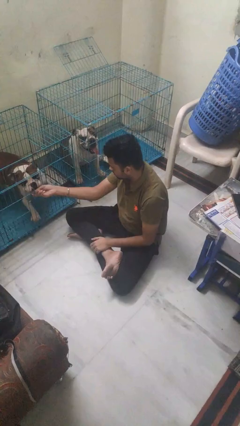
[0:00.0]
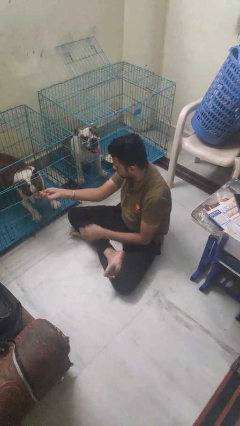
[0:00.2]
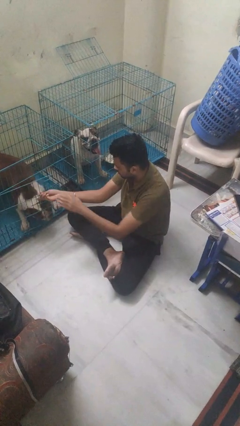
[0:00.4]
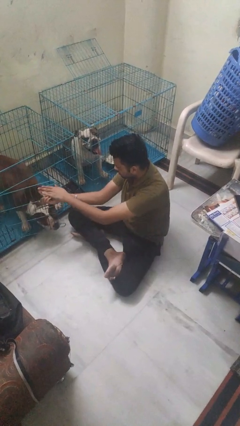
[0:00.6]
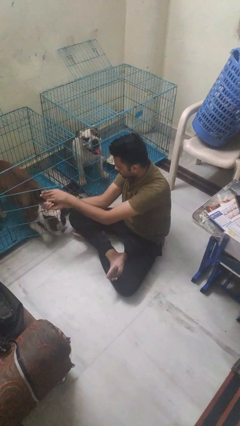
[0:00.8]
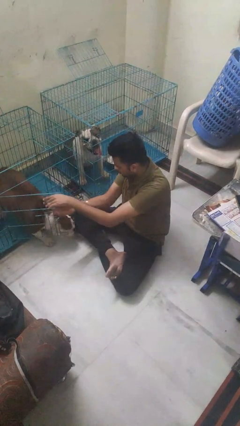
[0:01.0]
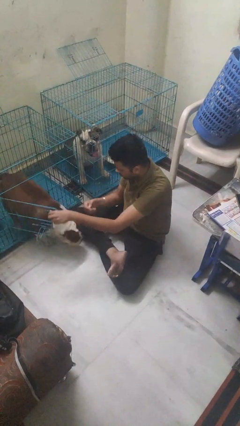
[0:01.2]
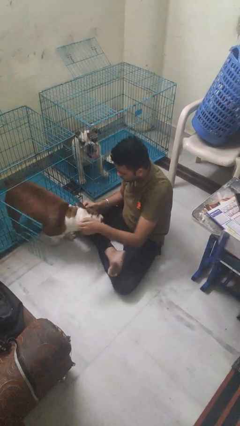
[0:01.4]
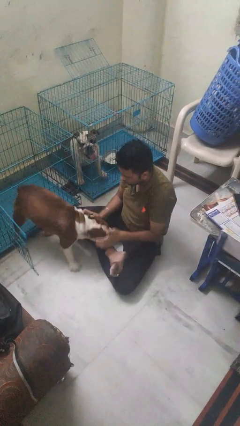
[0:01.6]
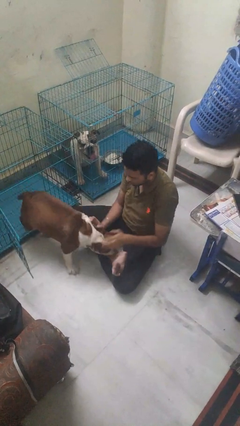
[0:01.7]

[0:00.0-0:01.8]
person uncrates dog

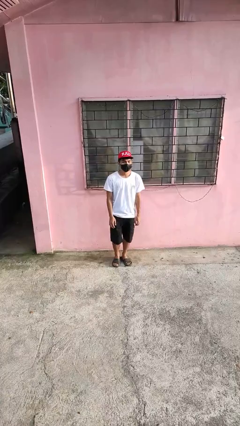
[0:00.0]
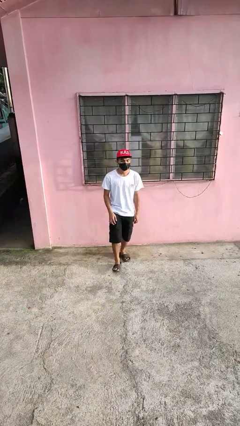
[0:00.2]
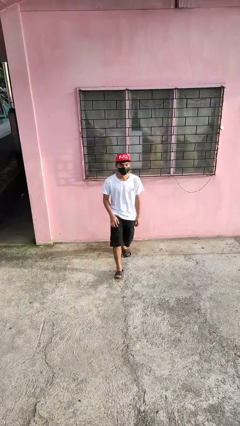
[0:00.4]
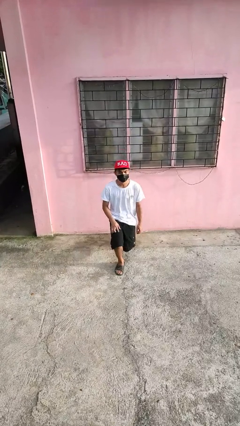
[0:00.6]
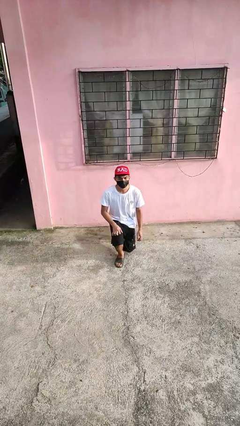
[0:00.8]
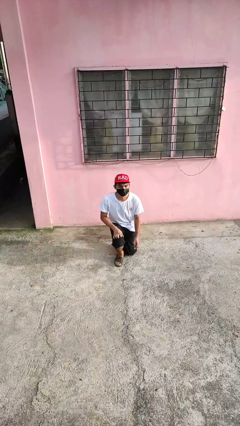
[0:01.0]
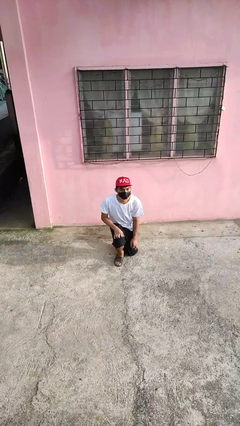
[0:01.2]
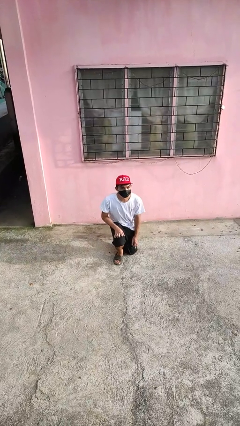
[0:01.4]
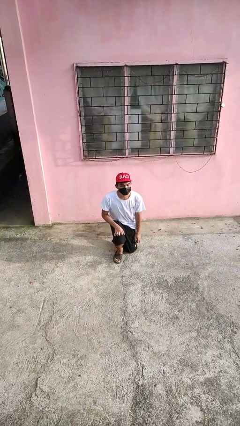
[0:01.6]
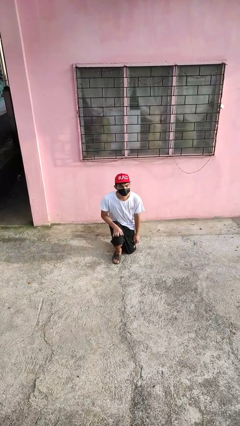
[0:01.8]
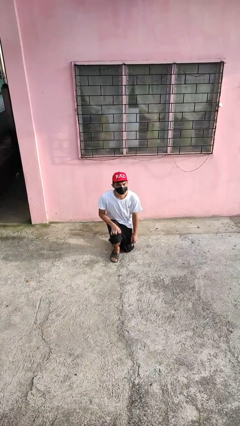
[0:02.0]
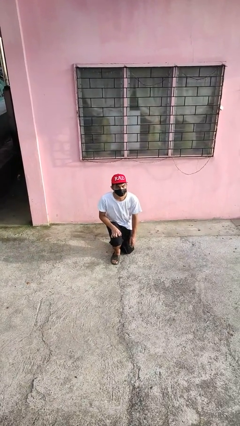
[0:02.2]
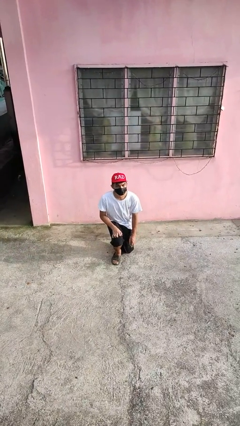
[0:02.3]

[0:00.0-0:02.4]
person kneels

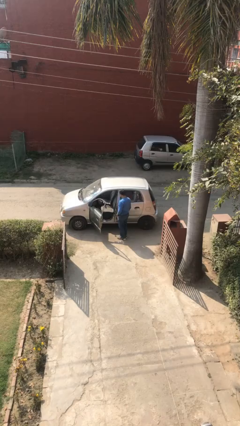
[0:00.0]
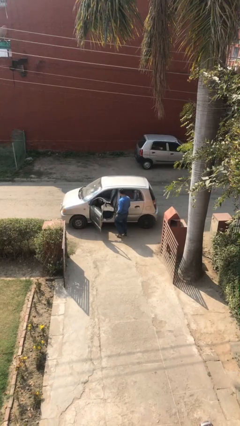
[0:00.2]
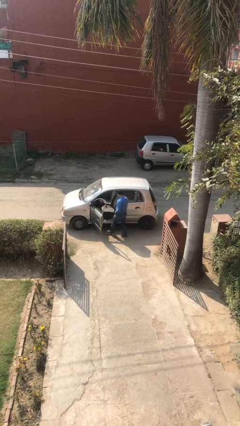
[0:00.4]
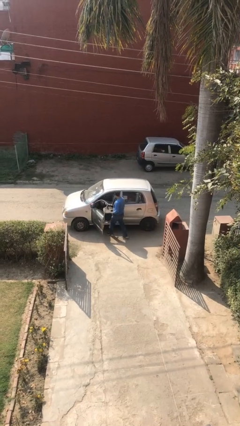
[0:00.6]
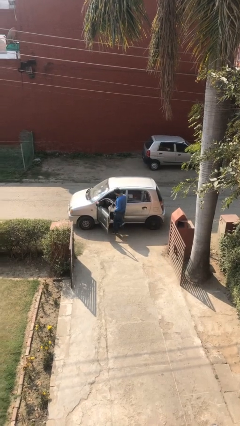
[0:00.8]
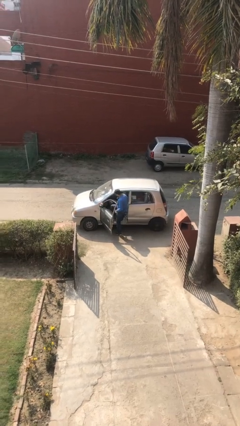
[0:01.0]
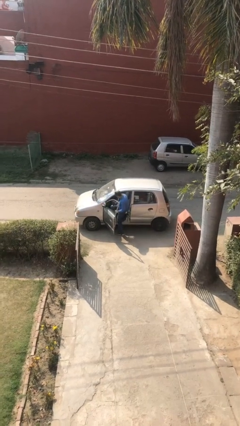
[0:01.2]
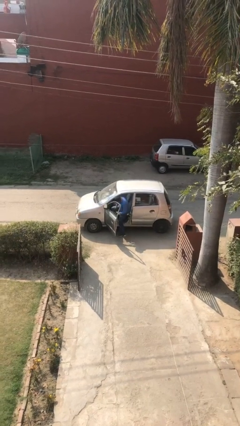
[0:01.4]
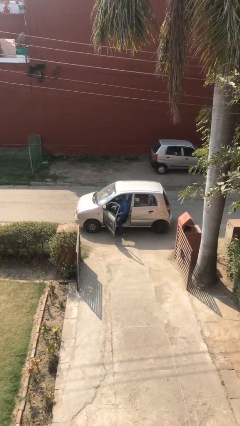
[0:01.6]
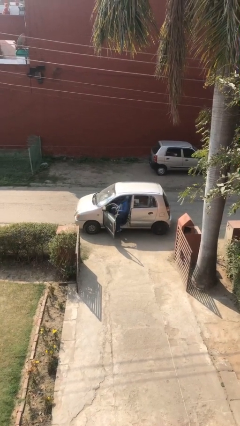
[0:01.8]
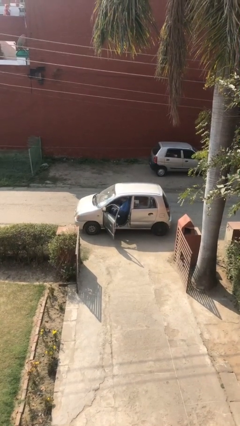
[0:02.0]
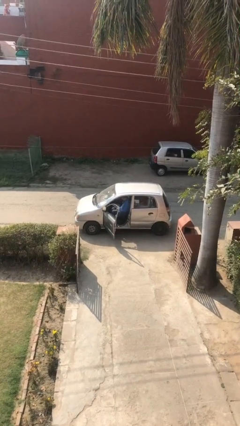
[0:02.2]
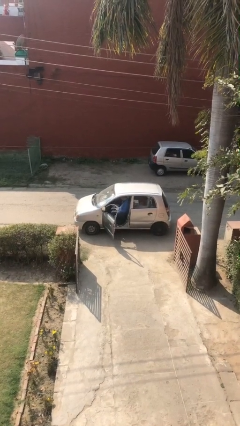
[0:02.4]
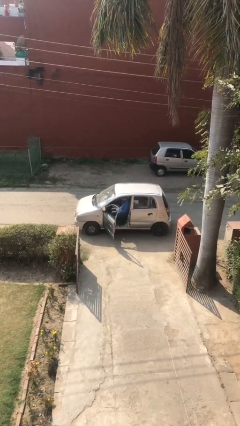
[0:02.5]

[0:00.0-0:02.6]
person enters car

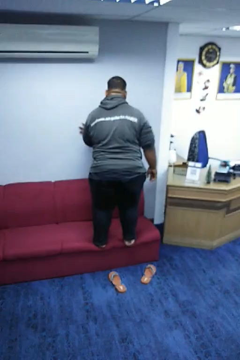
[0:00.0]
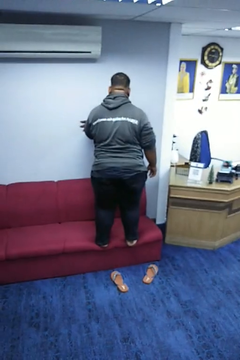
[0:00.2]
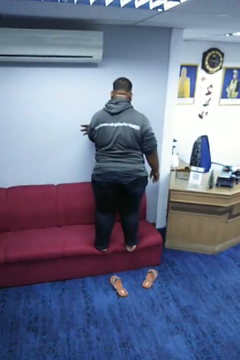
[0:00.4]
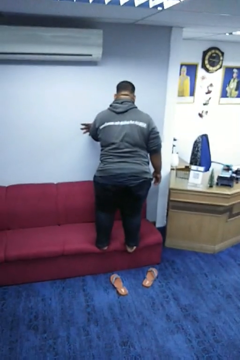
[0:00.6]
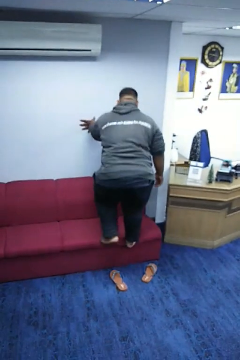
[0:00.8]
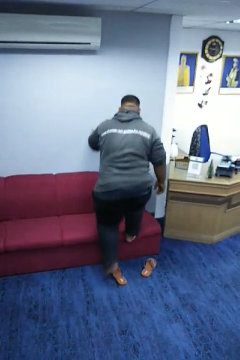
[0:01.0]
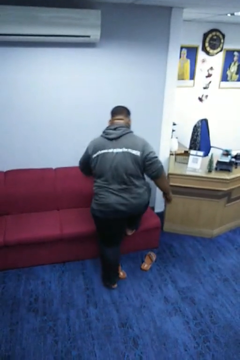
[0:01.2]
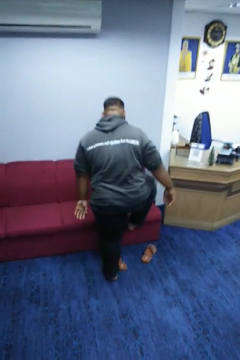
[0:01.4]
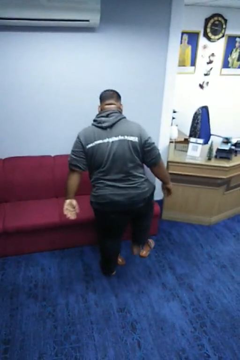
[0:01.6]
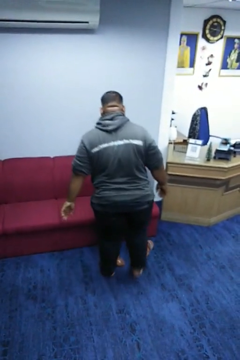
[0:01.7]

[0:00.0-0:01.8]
person climbs off couch

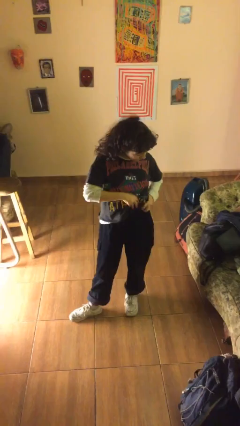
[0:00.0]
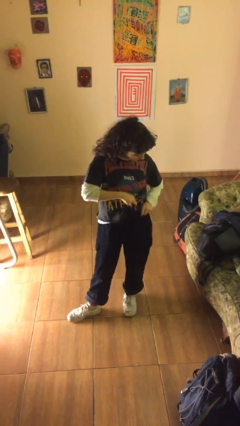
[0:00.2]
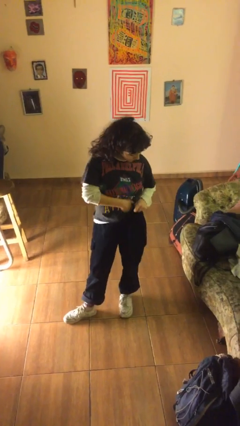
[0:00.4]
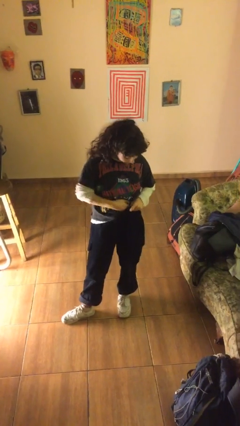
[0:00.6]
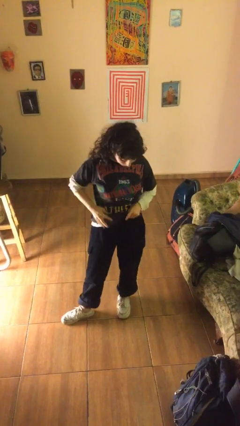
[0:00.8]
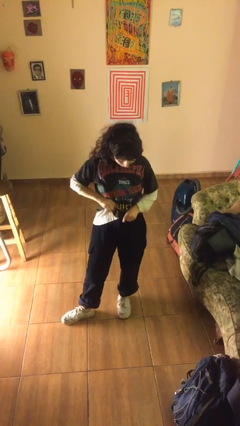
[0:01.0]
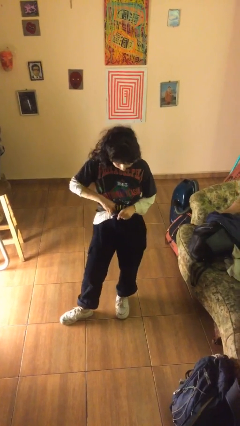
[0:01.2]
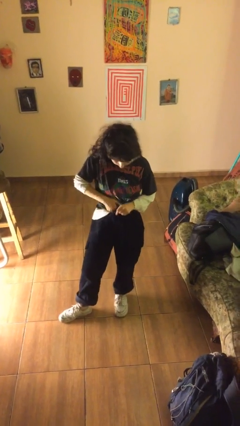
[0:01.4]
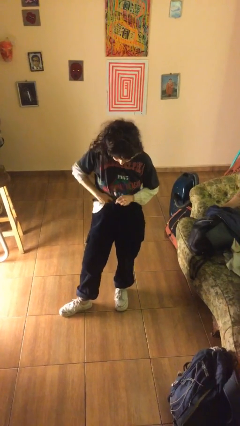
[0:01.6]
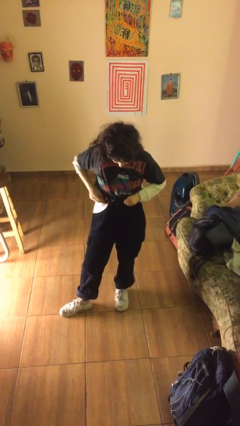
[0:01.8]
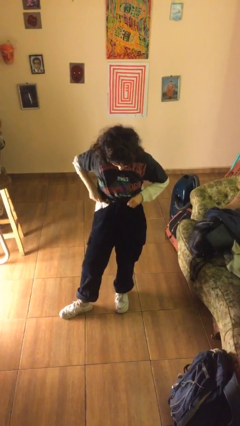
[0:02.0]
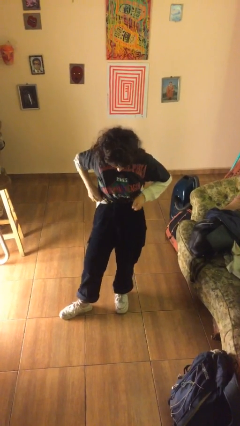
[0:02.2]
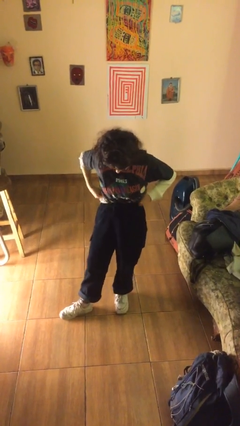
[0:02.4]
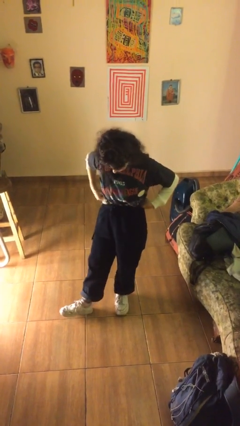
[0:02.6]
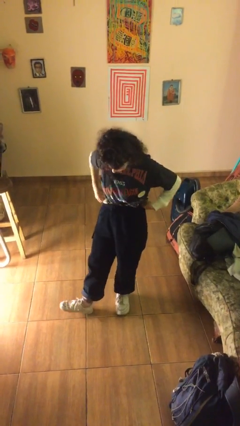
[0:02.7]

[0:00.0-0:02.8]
person tucks in shirt

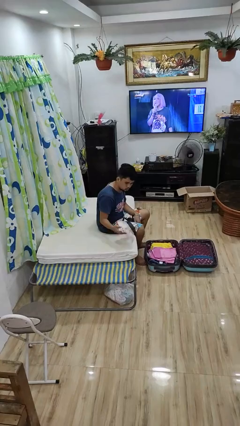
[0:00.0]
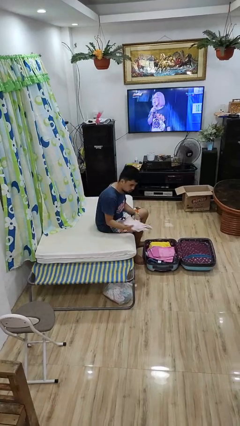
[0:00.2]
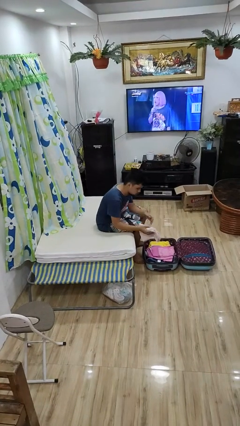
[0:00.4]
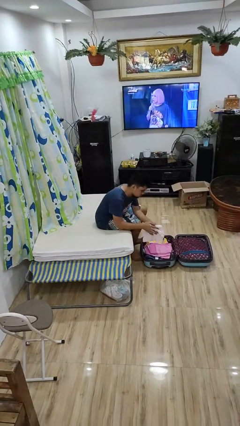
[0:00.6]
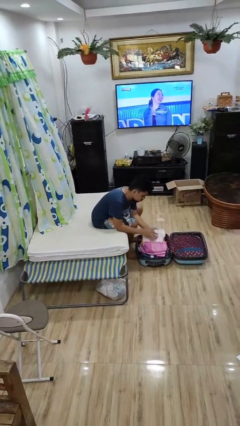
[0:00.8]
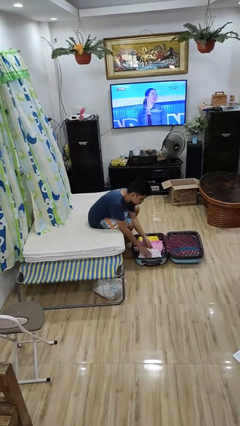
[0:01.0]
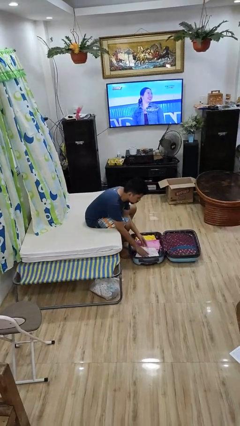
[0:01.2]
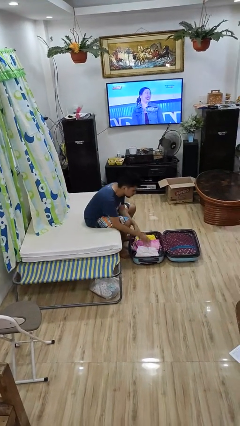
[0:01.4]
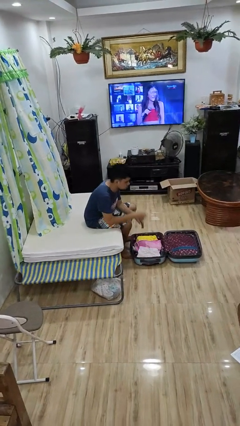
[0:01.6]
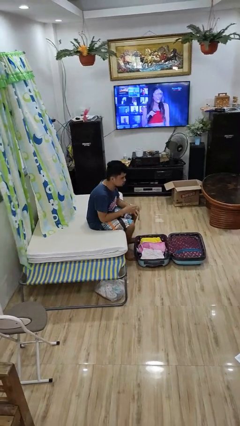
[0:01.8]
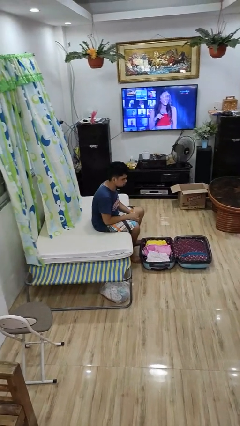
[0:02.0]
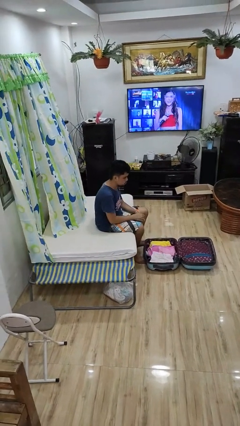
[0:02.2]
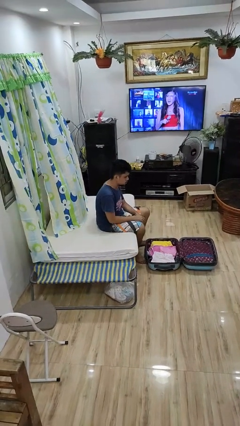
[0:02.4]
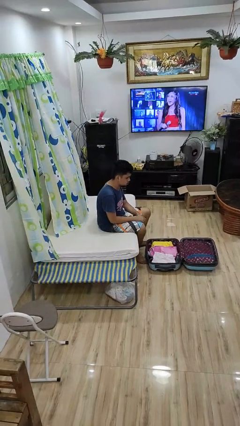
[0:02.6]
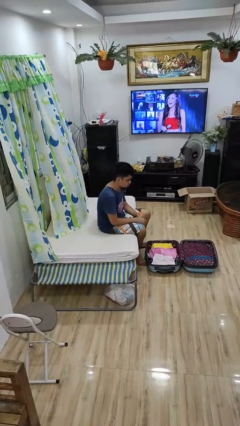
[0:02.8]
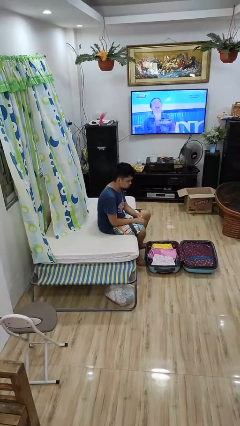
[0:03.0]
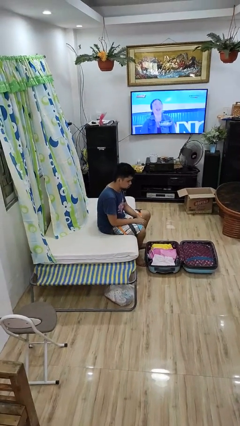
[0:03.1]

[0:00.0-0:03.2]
person loads clothes into suitcase

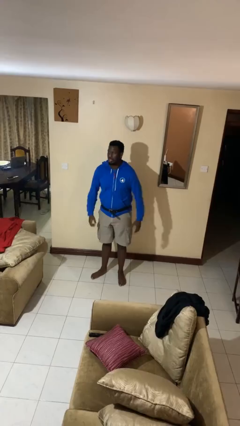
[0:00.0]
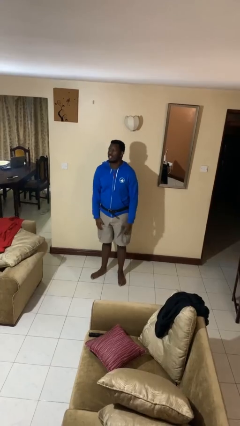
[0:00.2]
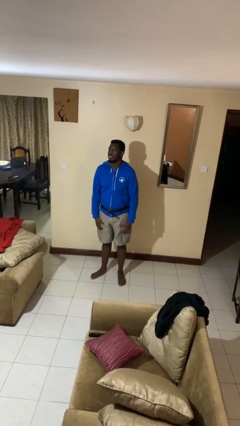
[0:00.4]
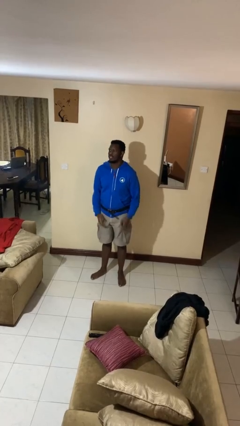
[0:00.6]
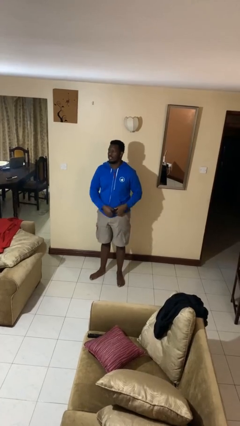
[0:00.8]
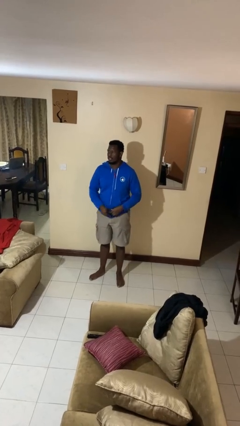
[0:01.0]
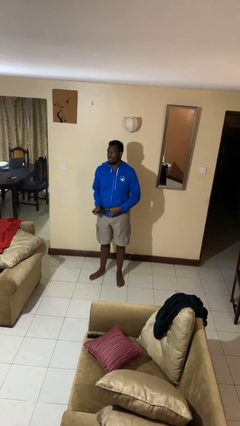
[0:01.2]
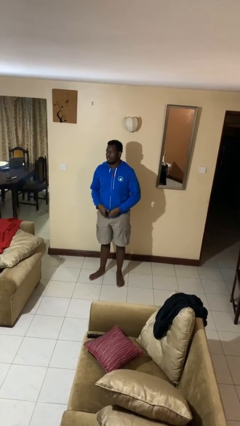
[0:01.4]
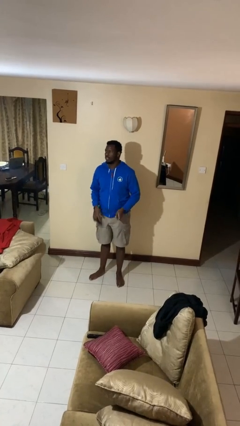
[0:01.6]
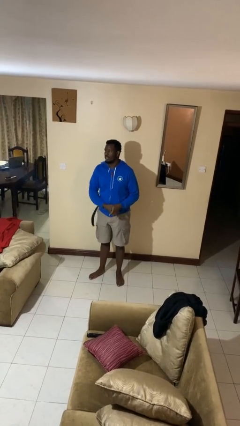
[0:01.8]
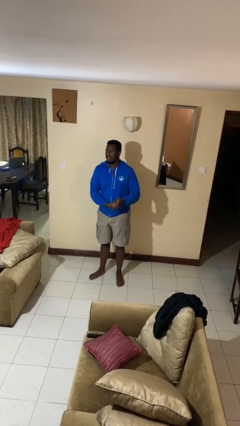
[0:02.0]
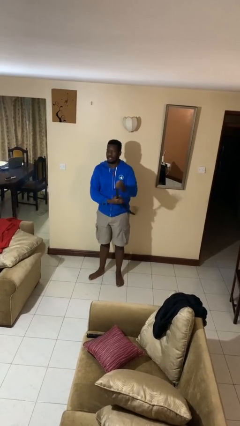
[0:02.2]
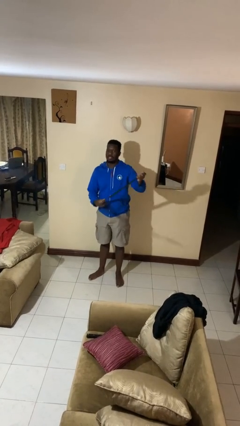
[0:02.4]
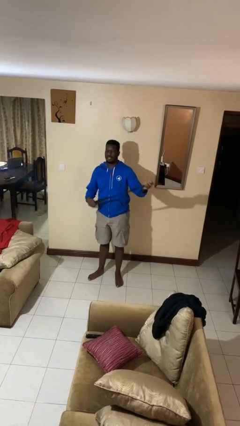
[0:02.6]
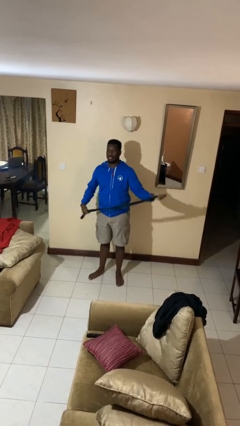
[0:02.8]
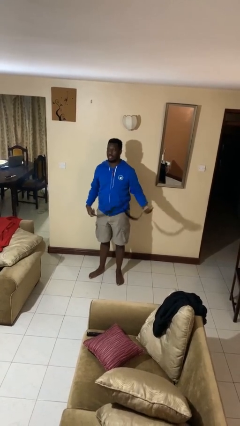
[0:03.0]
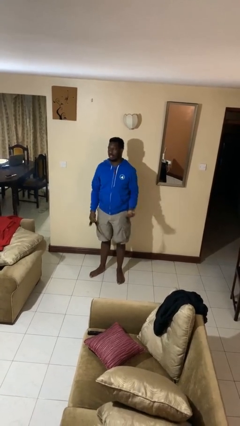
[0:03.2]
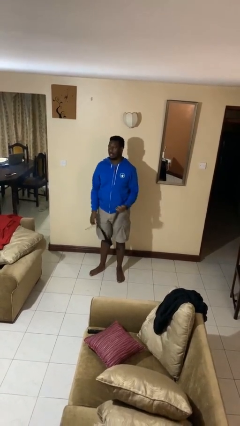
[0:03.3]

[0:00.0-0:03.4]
person takes off belt
